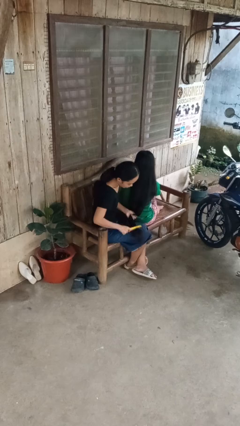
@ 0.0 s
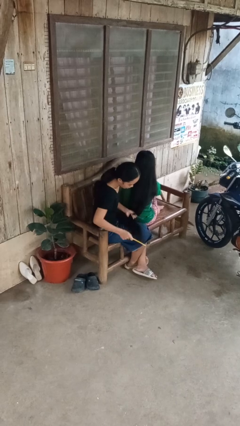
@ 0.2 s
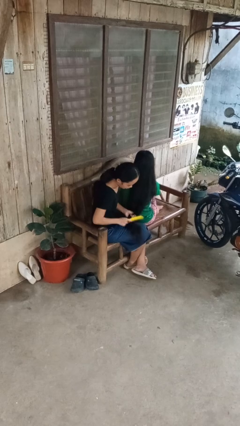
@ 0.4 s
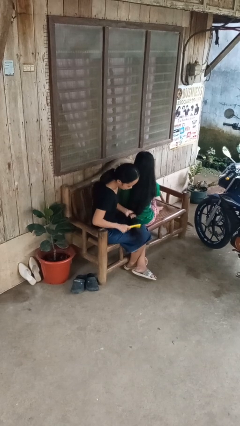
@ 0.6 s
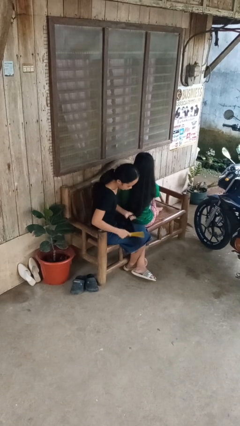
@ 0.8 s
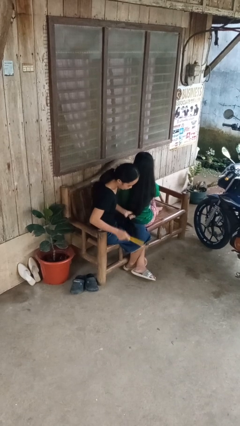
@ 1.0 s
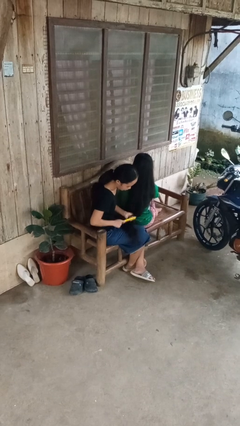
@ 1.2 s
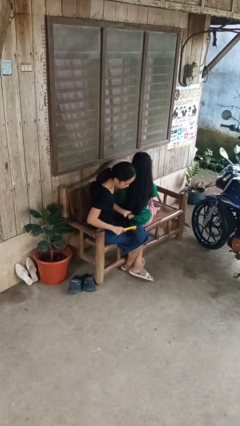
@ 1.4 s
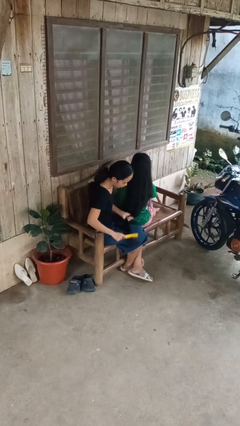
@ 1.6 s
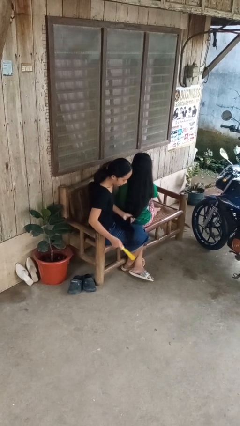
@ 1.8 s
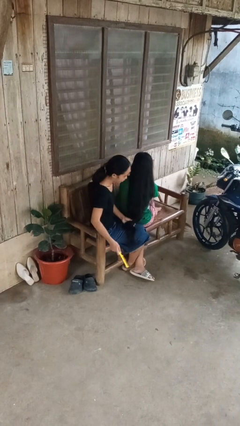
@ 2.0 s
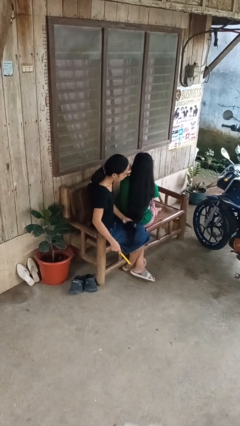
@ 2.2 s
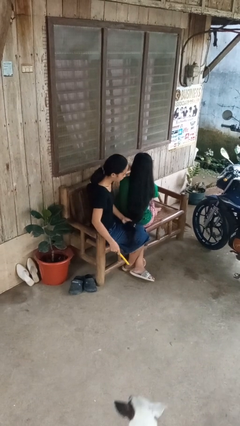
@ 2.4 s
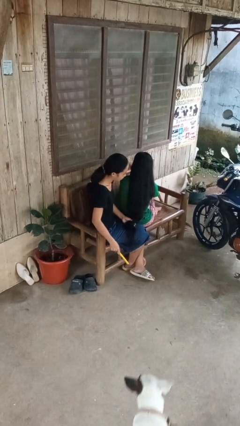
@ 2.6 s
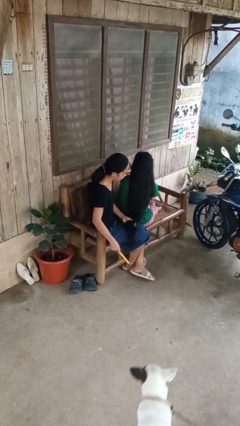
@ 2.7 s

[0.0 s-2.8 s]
person brushes hair of person

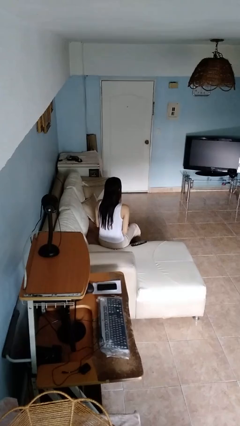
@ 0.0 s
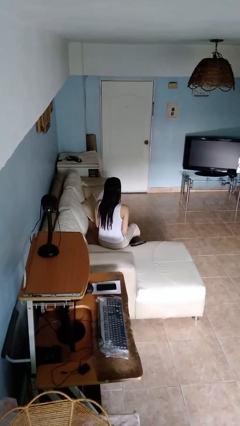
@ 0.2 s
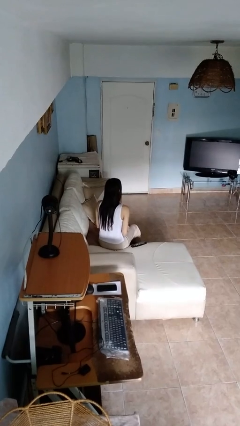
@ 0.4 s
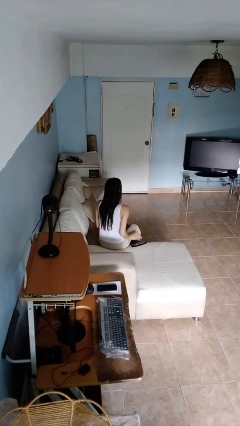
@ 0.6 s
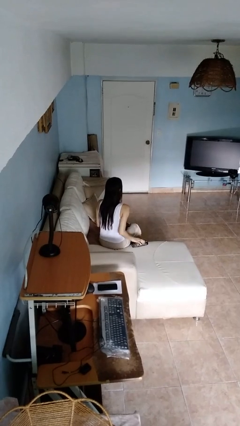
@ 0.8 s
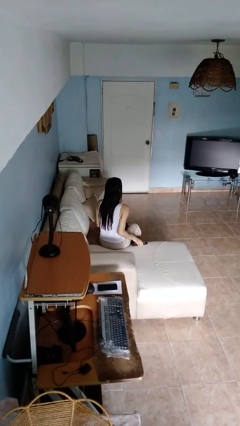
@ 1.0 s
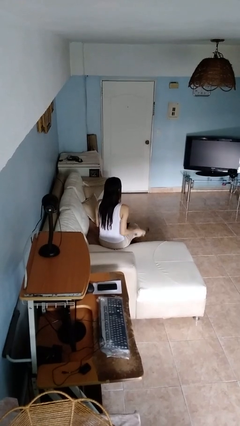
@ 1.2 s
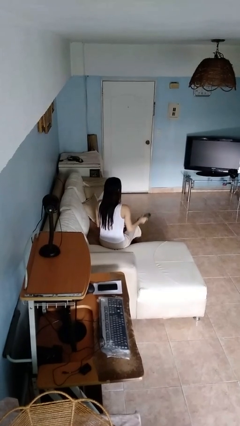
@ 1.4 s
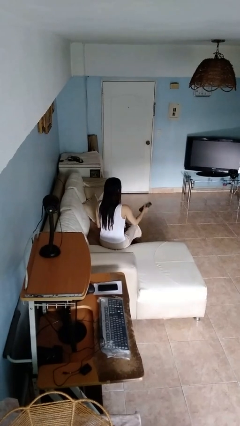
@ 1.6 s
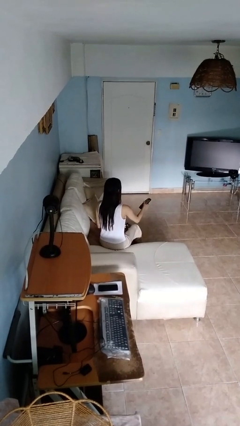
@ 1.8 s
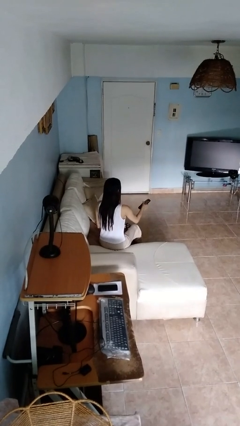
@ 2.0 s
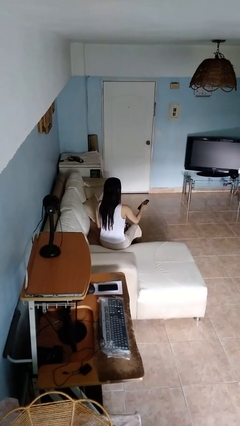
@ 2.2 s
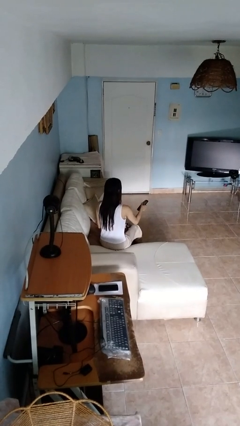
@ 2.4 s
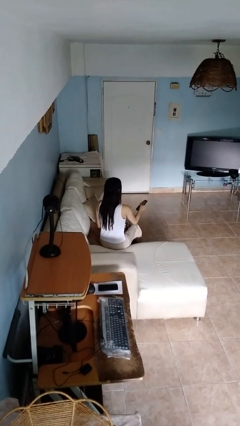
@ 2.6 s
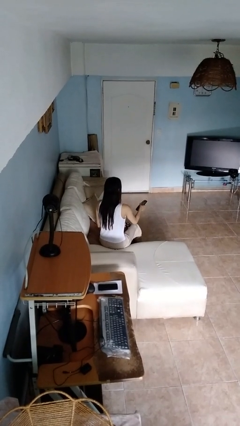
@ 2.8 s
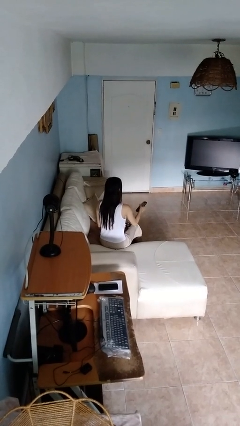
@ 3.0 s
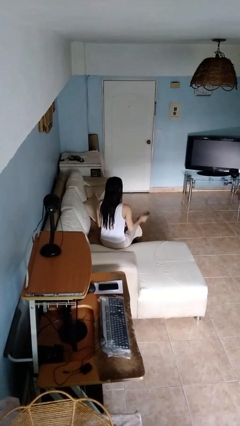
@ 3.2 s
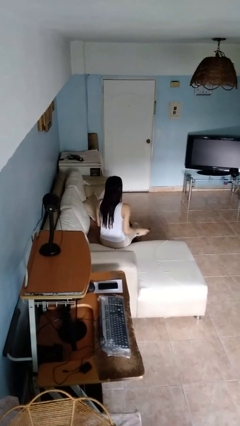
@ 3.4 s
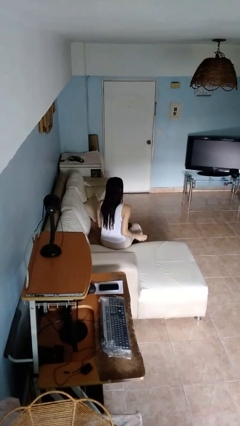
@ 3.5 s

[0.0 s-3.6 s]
person uses television remote

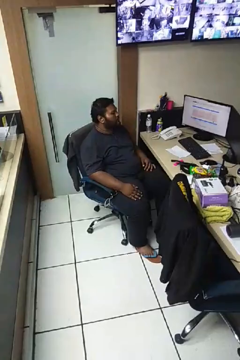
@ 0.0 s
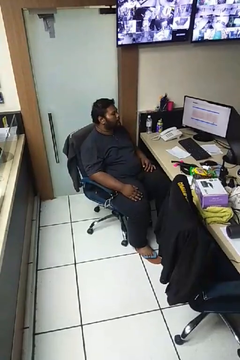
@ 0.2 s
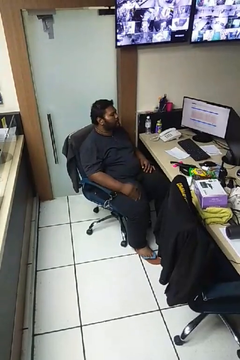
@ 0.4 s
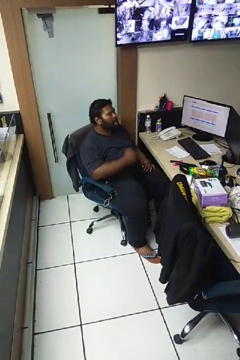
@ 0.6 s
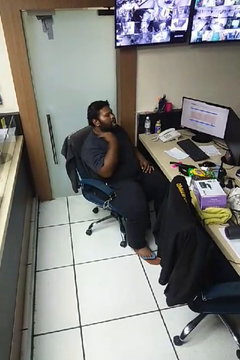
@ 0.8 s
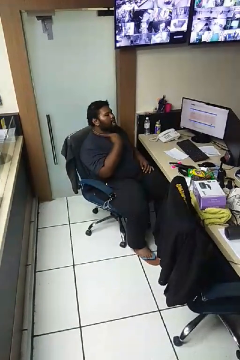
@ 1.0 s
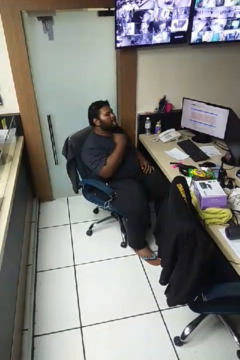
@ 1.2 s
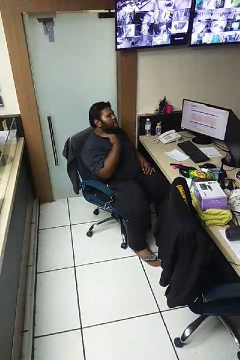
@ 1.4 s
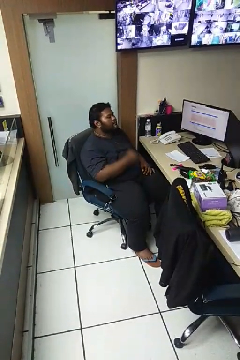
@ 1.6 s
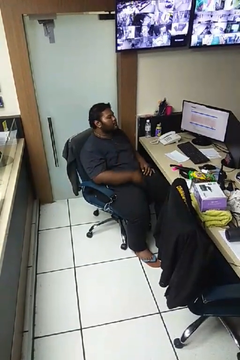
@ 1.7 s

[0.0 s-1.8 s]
person gestures cut

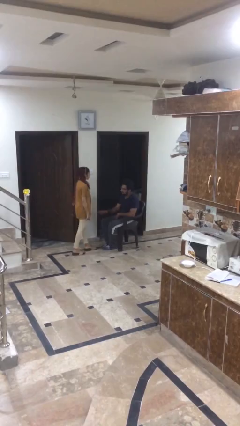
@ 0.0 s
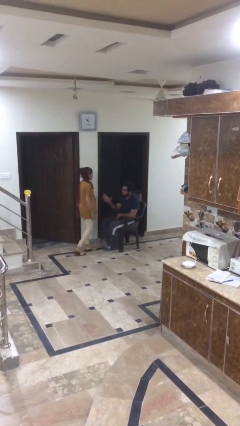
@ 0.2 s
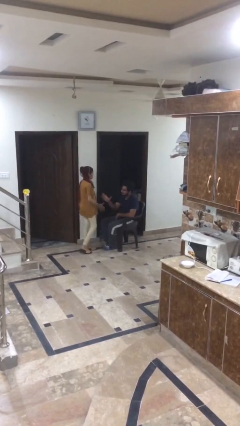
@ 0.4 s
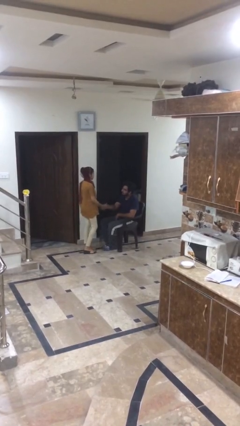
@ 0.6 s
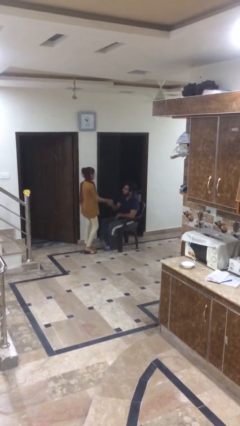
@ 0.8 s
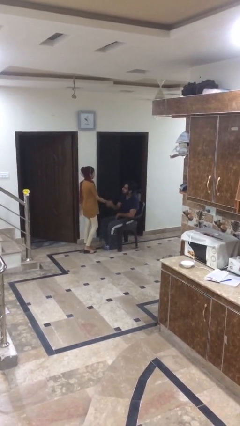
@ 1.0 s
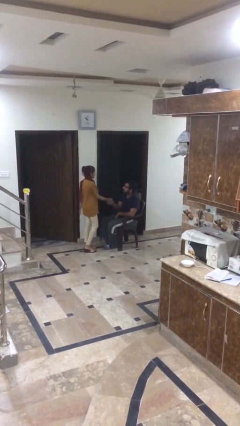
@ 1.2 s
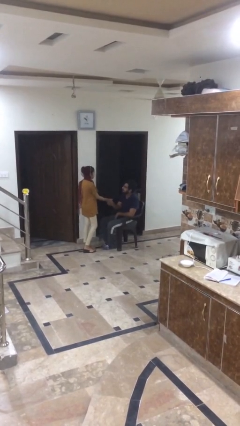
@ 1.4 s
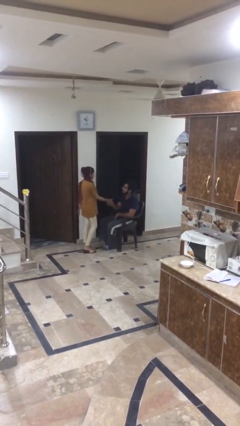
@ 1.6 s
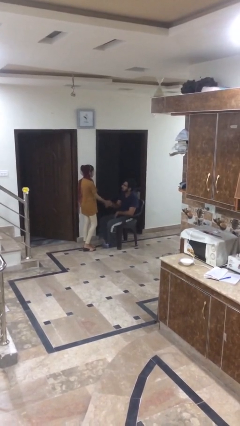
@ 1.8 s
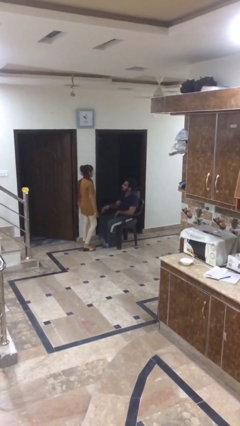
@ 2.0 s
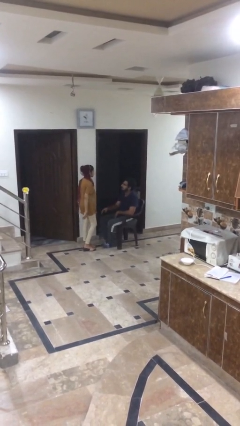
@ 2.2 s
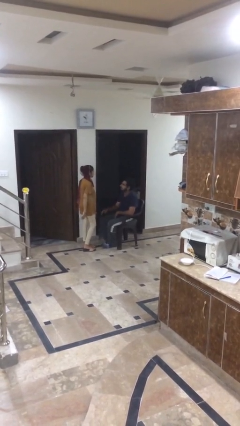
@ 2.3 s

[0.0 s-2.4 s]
person shakes hand

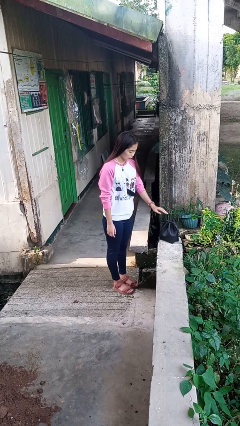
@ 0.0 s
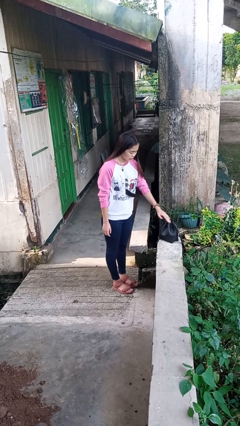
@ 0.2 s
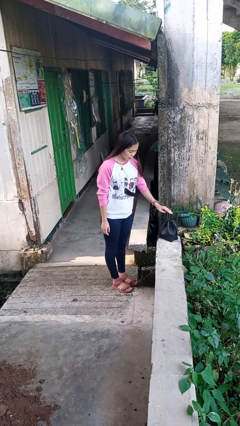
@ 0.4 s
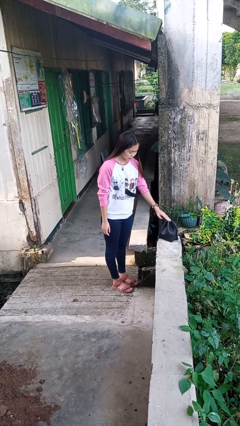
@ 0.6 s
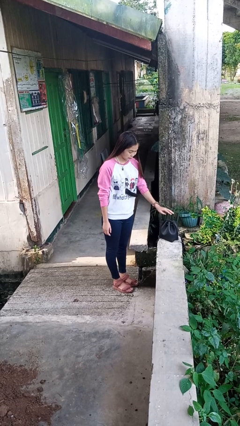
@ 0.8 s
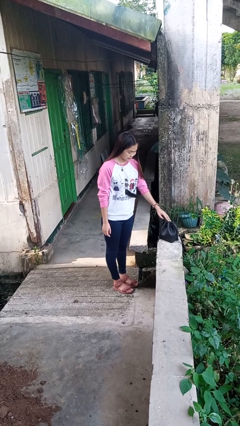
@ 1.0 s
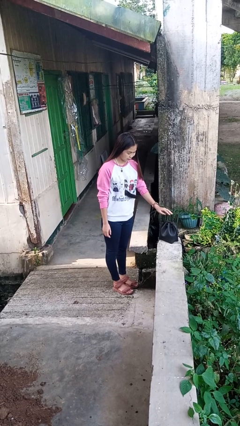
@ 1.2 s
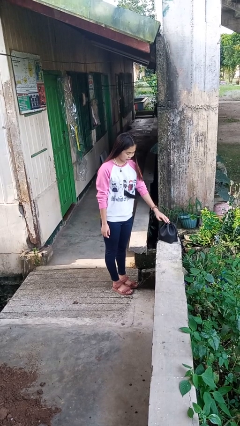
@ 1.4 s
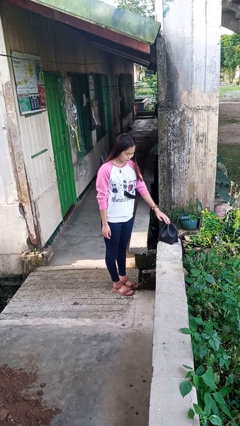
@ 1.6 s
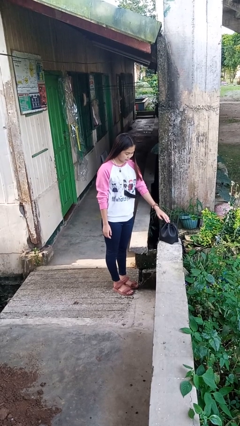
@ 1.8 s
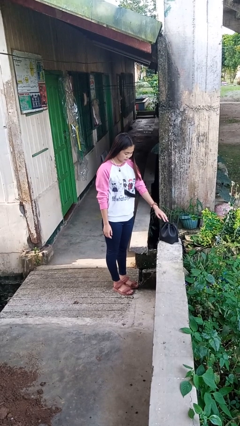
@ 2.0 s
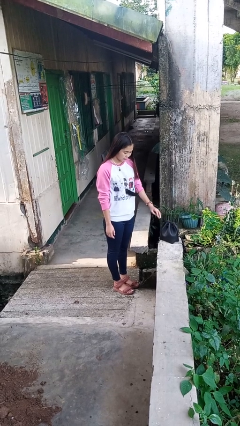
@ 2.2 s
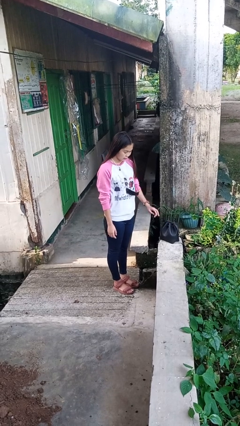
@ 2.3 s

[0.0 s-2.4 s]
person taps object with finger

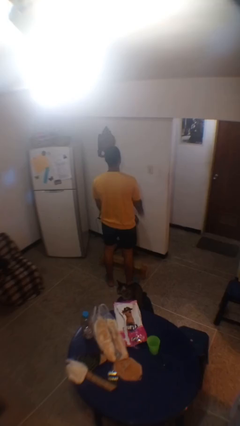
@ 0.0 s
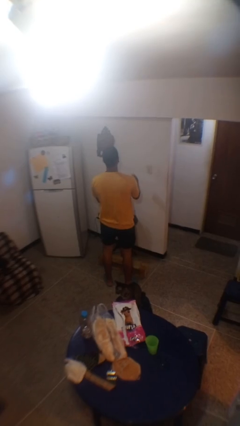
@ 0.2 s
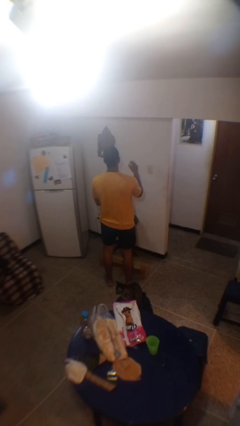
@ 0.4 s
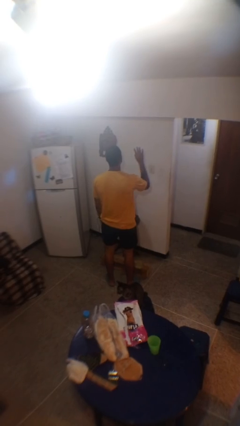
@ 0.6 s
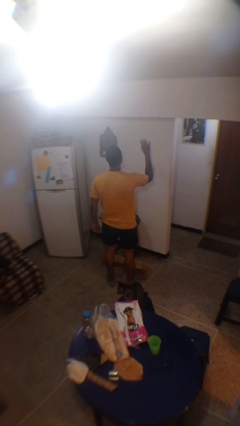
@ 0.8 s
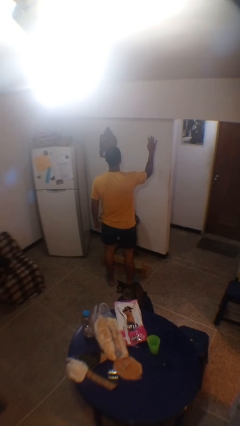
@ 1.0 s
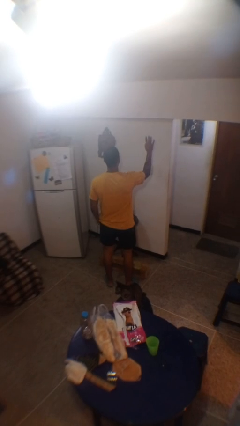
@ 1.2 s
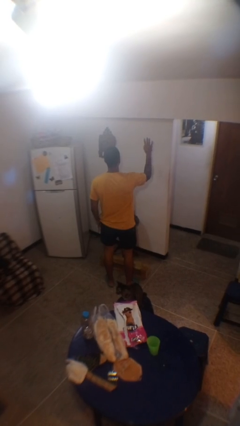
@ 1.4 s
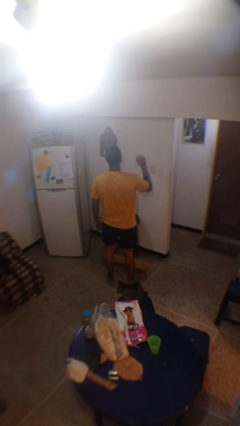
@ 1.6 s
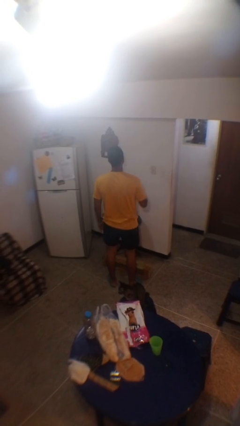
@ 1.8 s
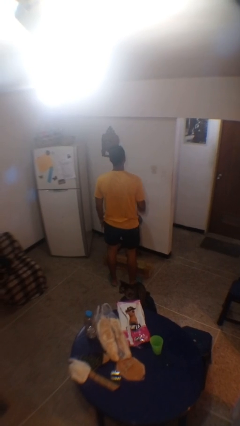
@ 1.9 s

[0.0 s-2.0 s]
person gestures number four

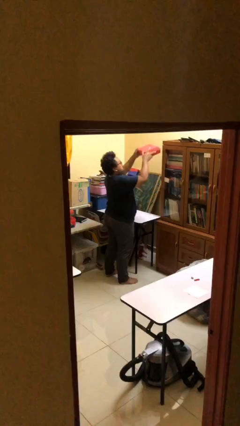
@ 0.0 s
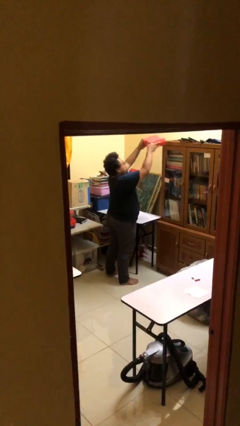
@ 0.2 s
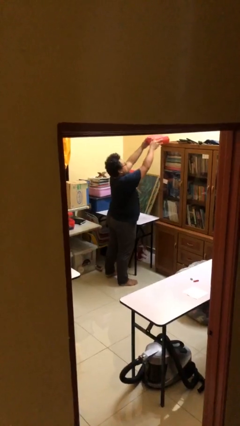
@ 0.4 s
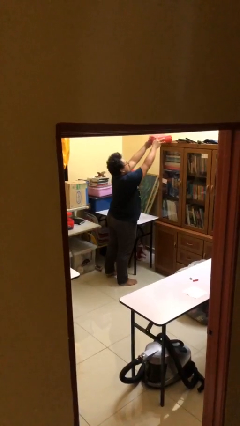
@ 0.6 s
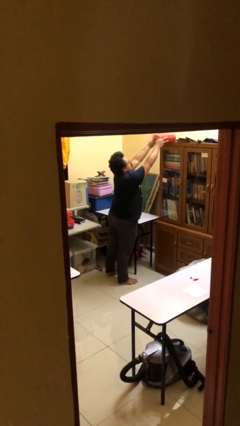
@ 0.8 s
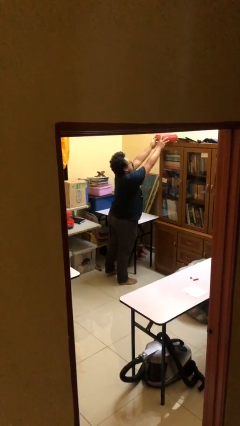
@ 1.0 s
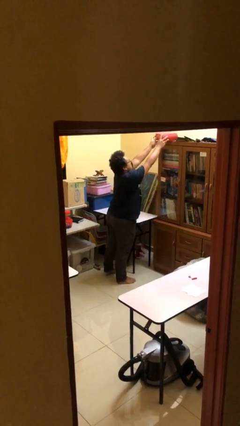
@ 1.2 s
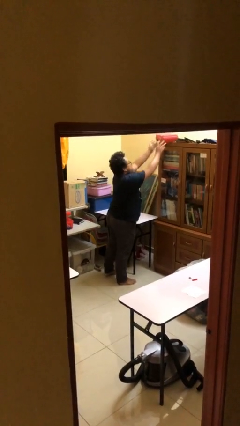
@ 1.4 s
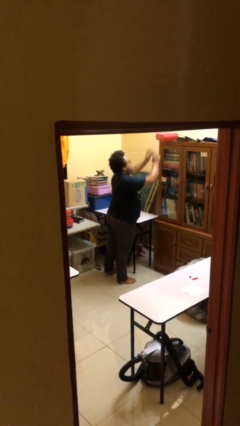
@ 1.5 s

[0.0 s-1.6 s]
person puts down object on shelf

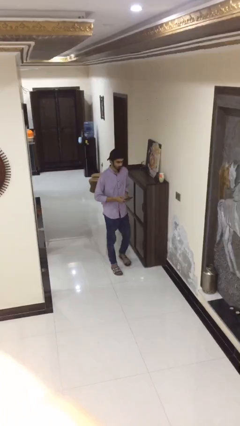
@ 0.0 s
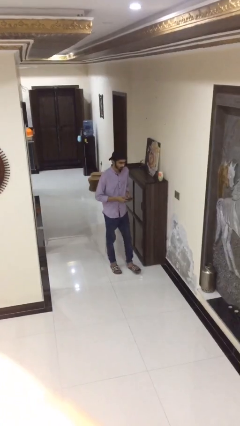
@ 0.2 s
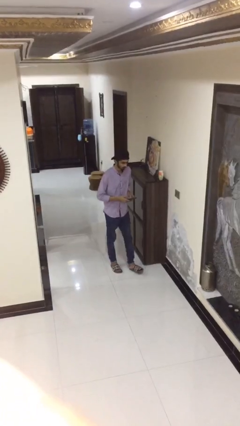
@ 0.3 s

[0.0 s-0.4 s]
person talks on phone

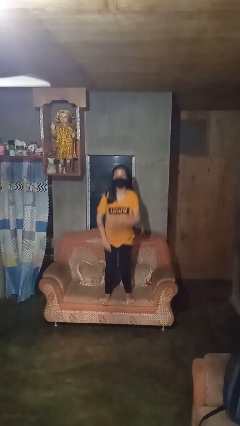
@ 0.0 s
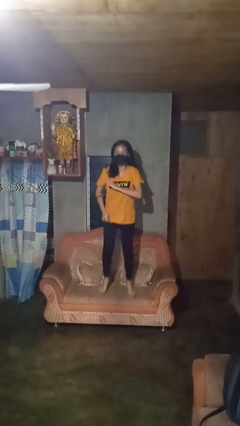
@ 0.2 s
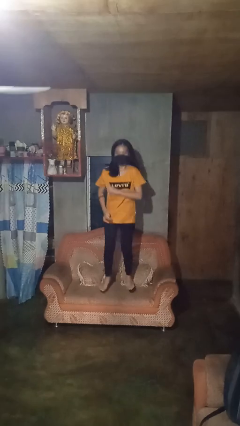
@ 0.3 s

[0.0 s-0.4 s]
person jumps on couch
